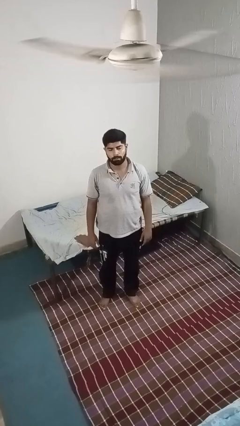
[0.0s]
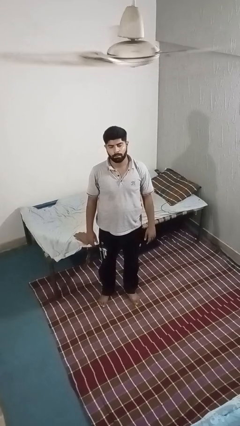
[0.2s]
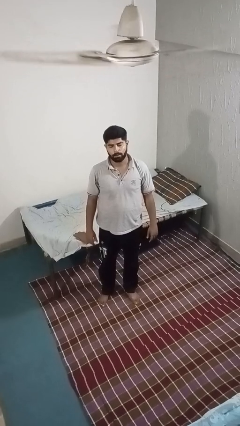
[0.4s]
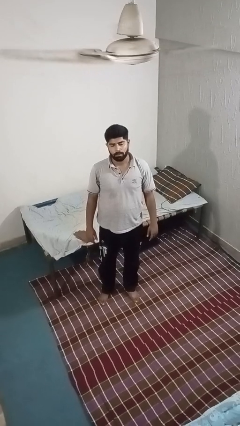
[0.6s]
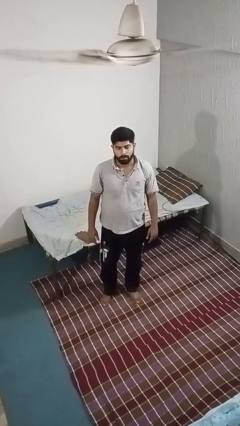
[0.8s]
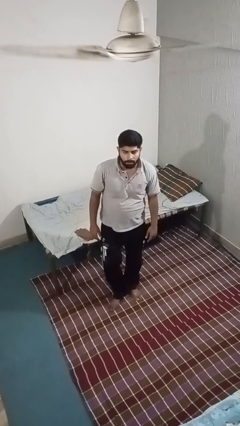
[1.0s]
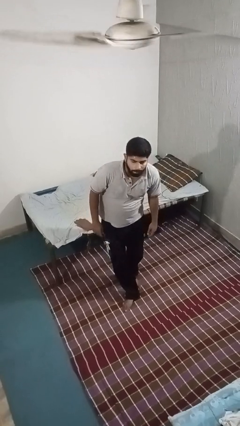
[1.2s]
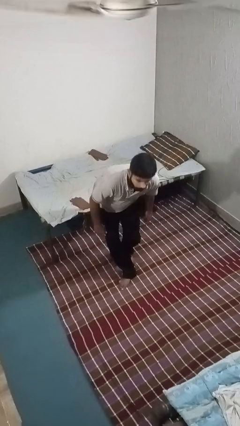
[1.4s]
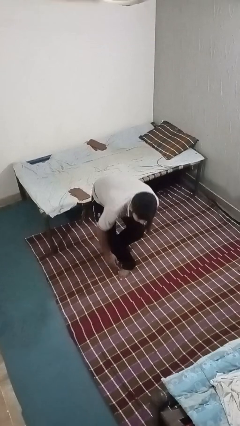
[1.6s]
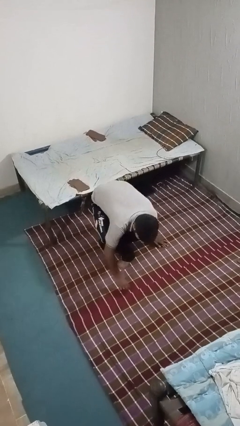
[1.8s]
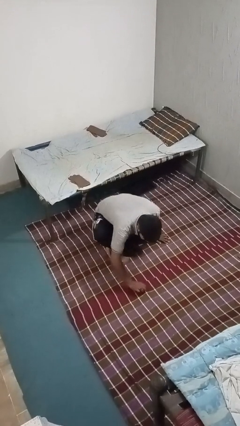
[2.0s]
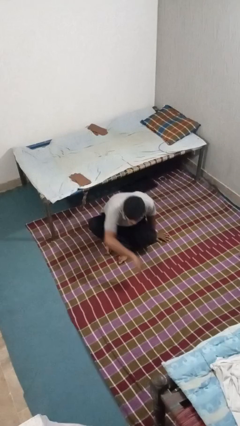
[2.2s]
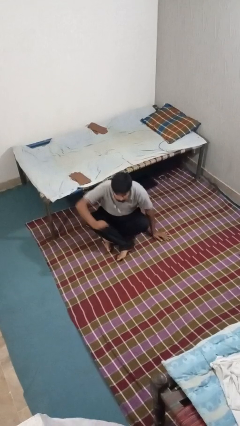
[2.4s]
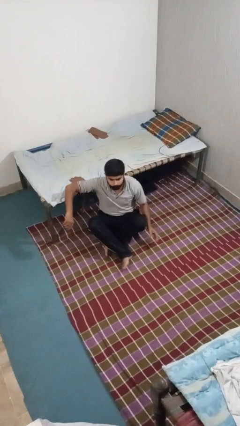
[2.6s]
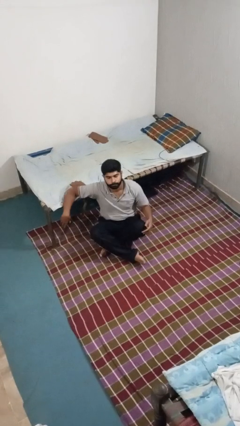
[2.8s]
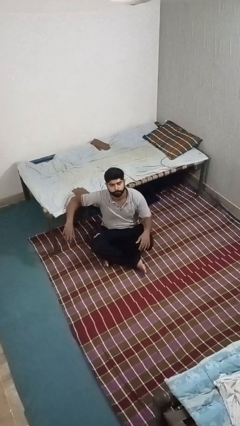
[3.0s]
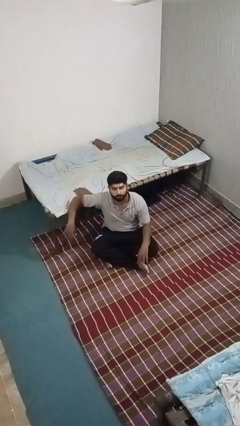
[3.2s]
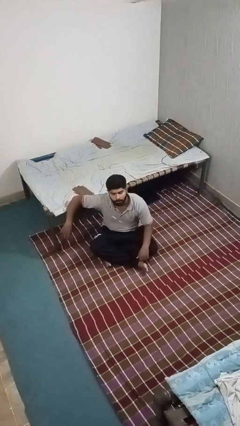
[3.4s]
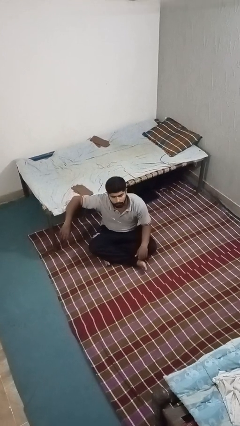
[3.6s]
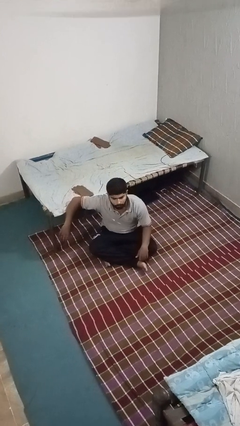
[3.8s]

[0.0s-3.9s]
person sits crisscross

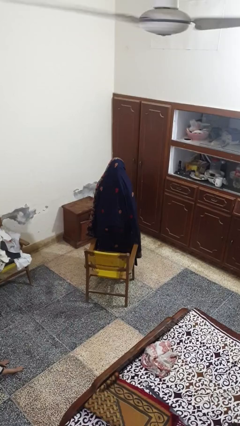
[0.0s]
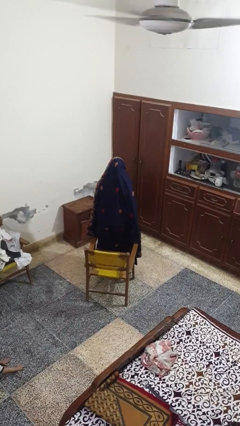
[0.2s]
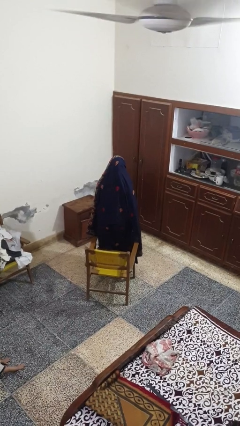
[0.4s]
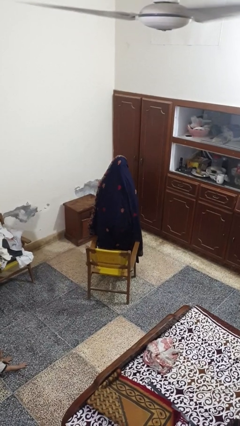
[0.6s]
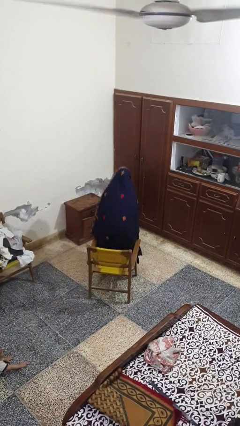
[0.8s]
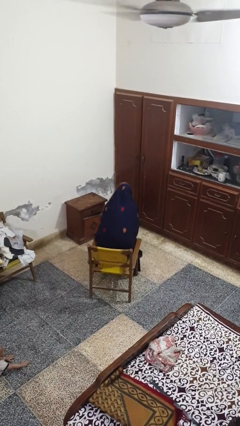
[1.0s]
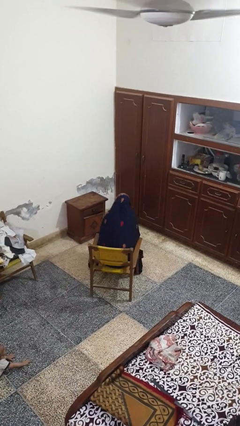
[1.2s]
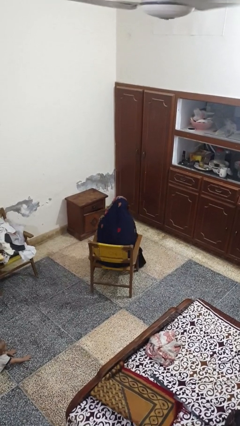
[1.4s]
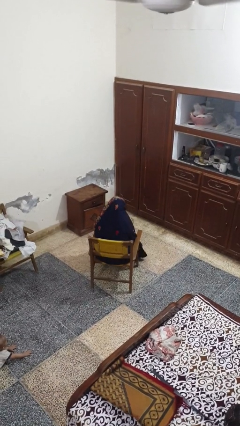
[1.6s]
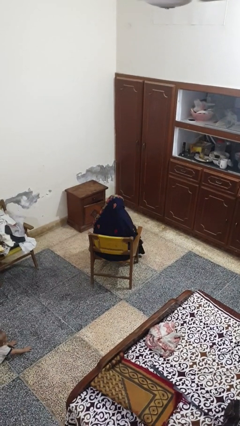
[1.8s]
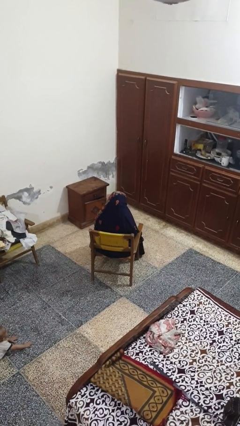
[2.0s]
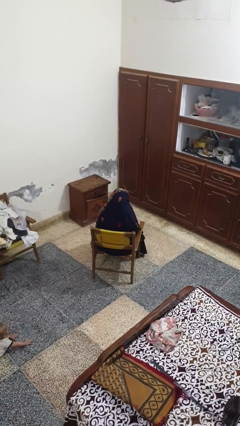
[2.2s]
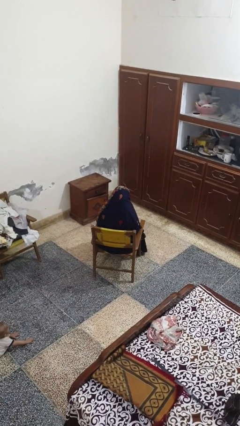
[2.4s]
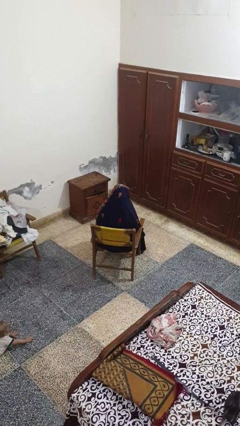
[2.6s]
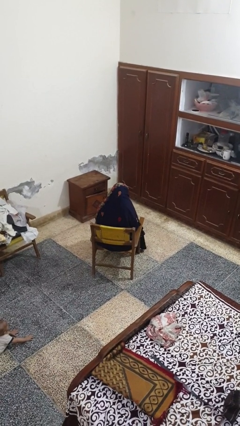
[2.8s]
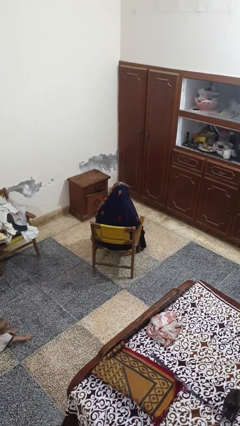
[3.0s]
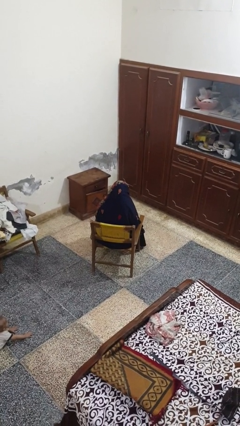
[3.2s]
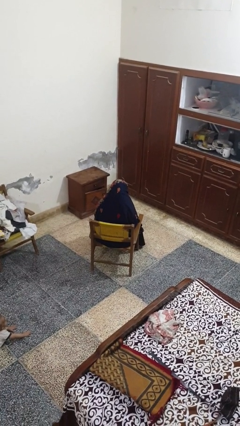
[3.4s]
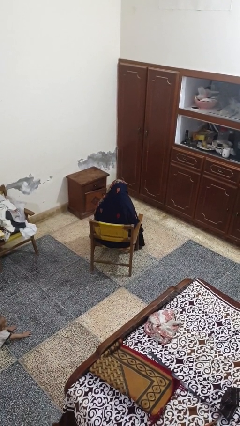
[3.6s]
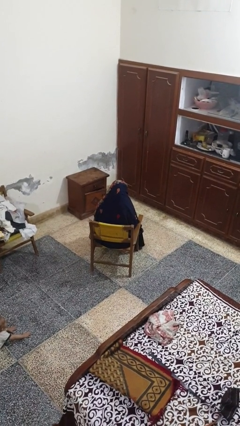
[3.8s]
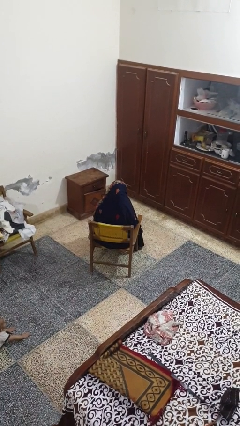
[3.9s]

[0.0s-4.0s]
person sits down

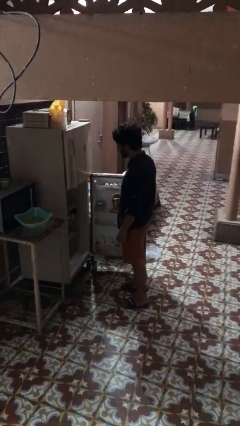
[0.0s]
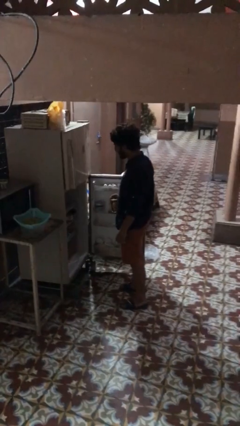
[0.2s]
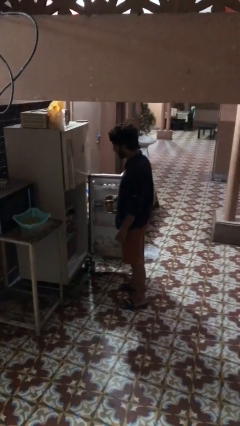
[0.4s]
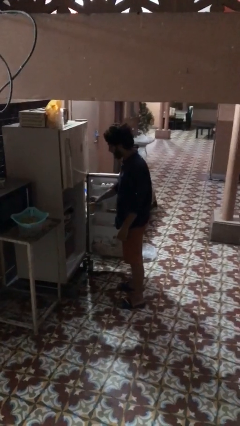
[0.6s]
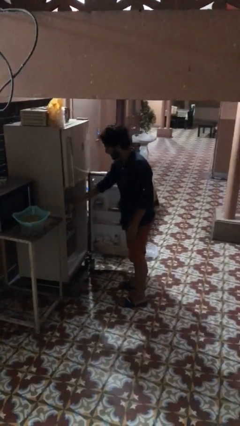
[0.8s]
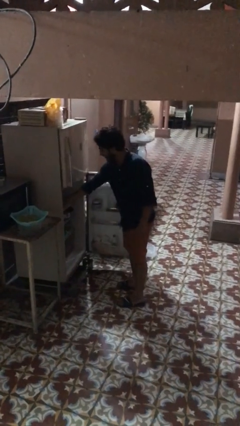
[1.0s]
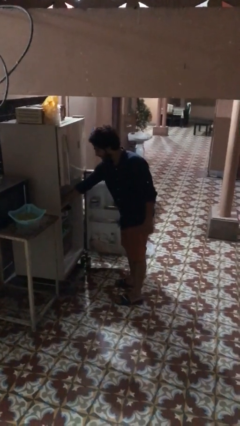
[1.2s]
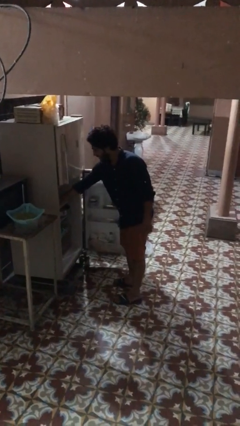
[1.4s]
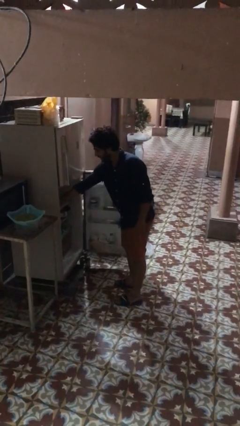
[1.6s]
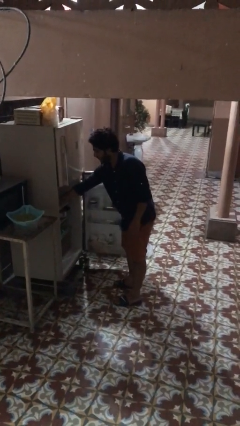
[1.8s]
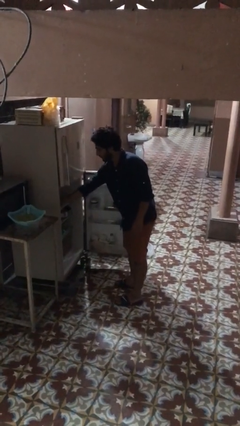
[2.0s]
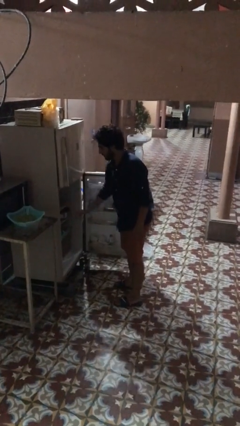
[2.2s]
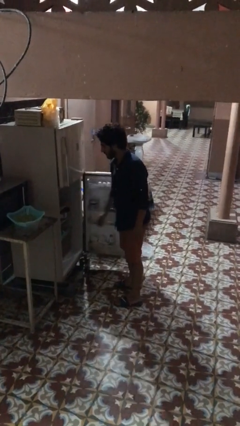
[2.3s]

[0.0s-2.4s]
person puts object into refrigerator

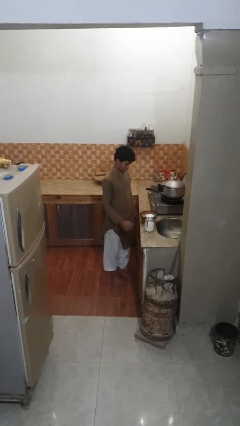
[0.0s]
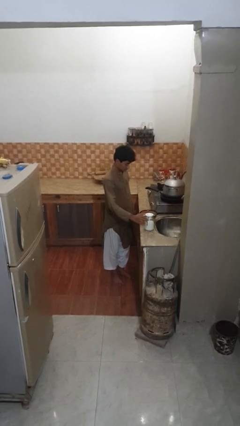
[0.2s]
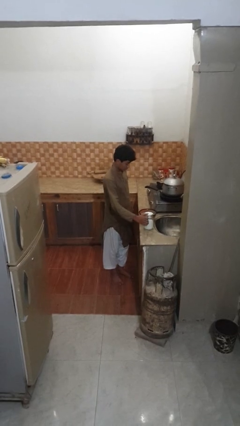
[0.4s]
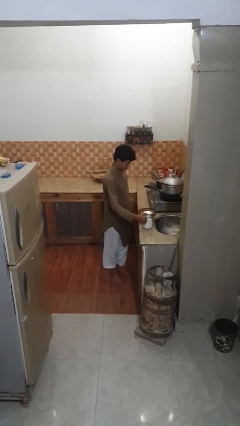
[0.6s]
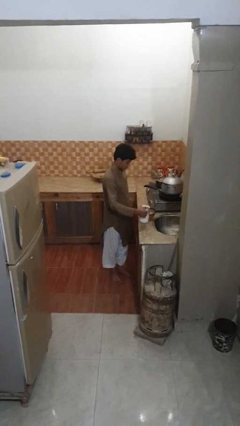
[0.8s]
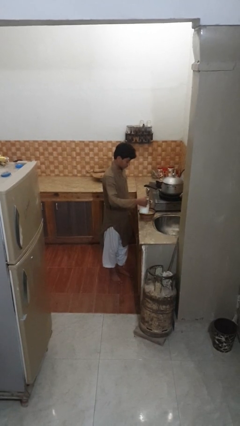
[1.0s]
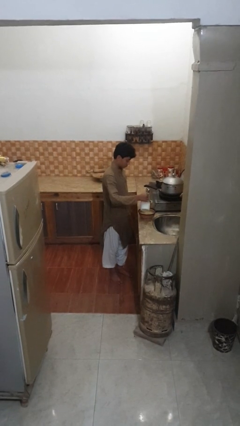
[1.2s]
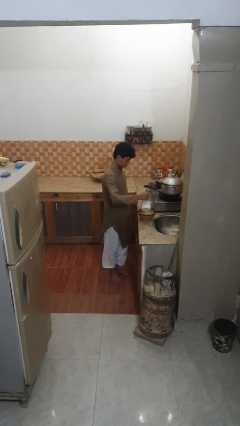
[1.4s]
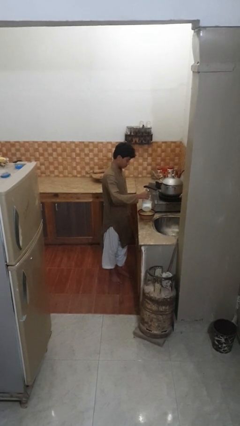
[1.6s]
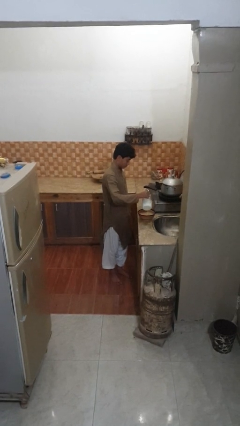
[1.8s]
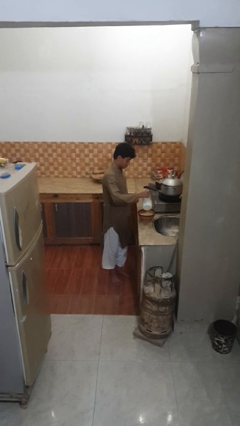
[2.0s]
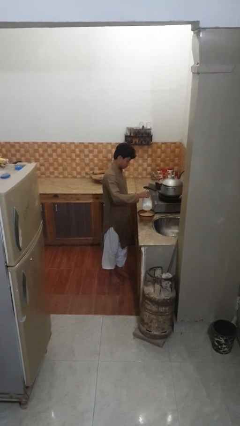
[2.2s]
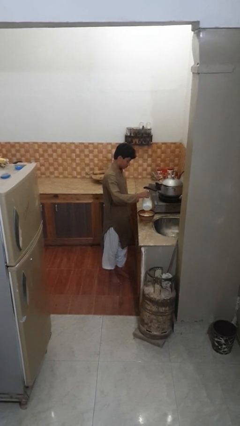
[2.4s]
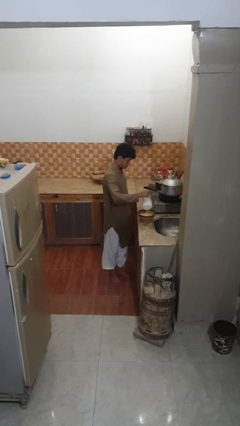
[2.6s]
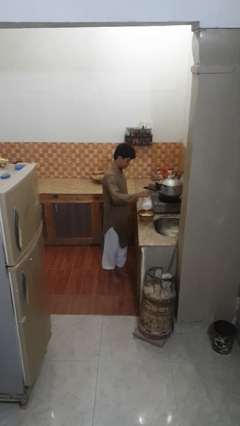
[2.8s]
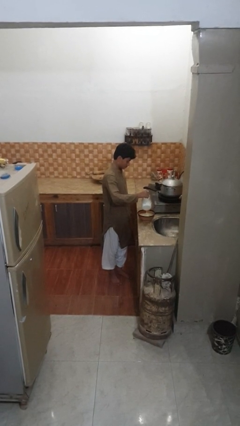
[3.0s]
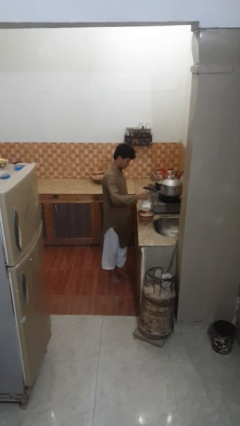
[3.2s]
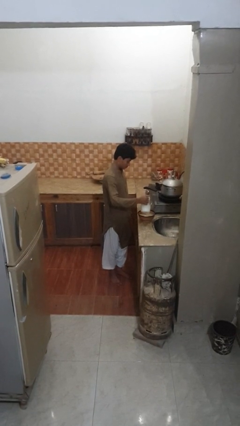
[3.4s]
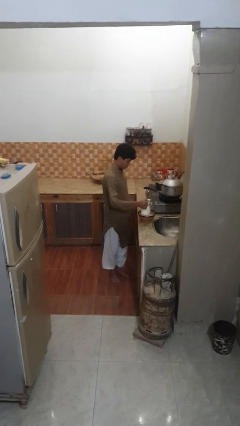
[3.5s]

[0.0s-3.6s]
person pours into bowl

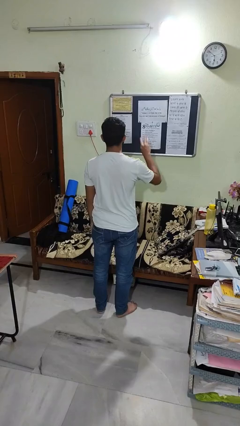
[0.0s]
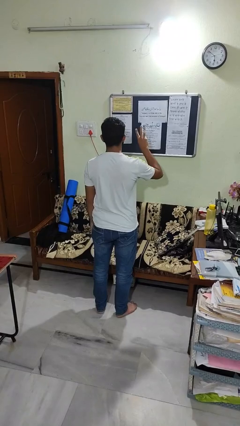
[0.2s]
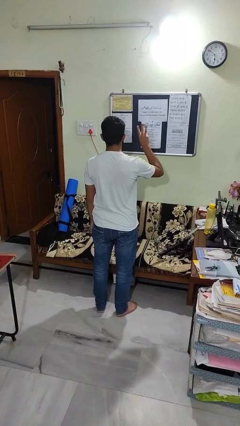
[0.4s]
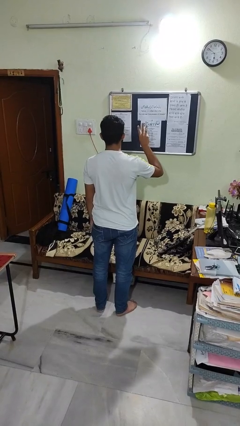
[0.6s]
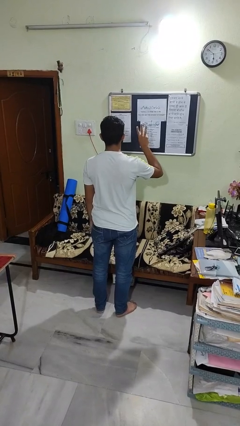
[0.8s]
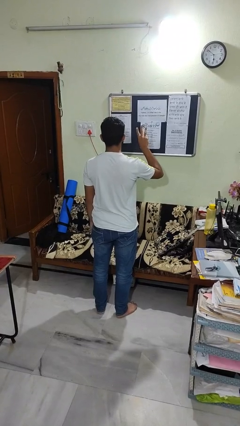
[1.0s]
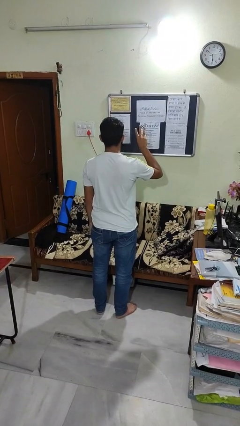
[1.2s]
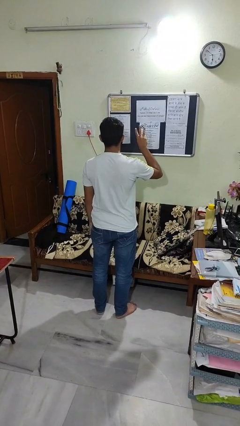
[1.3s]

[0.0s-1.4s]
person gestures number three

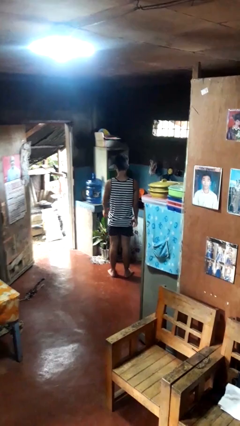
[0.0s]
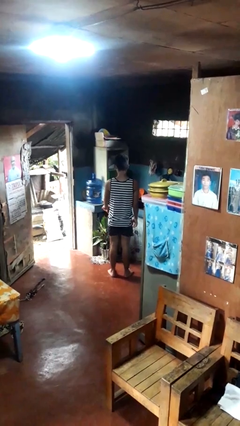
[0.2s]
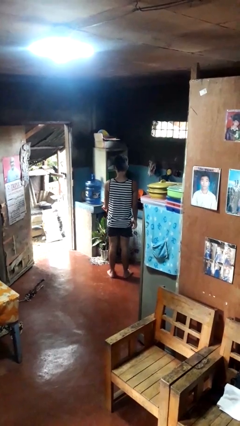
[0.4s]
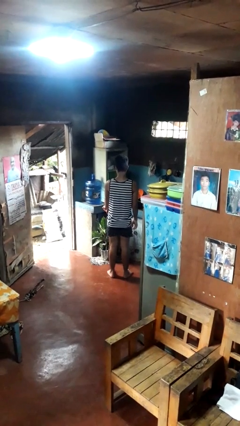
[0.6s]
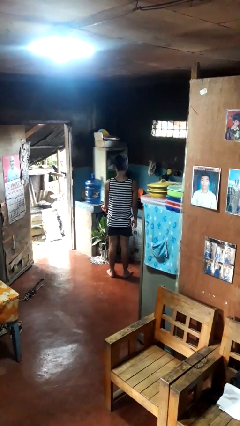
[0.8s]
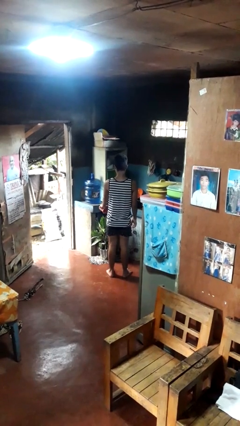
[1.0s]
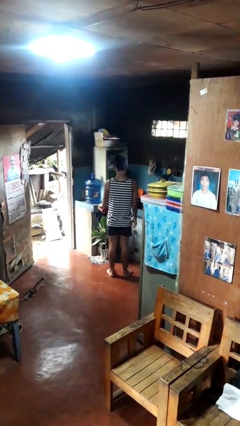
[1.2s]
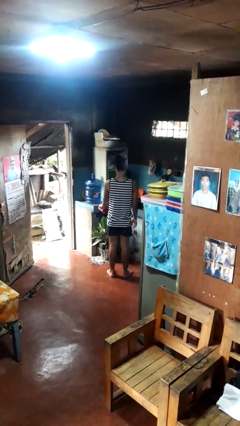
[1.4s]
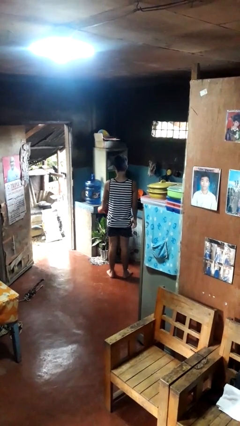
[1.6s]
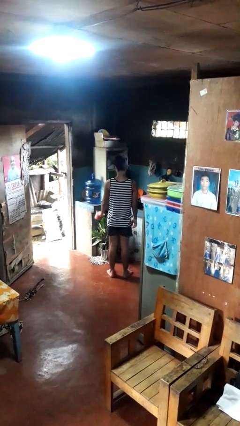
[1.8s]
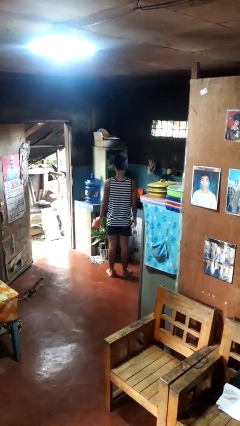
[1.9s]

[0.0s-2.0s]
person waters houseplant
